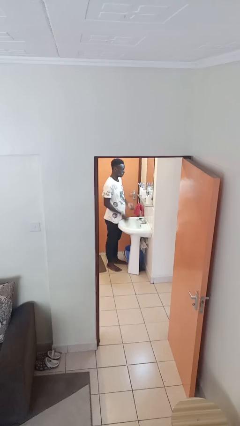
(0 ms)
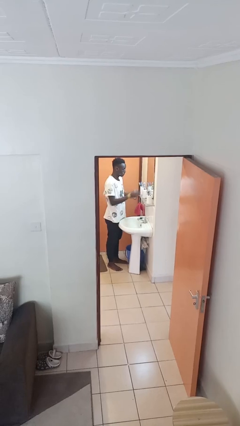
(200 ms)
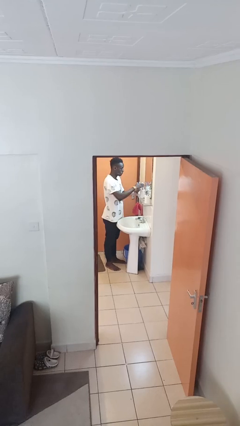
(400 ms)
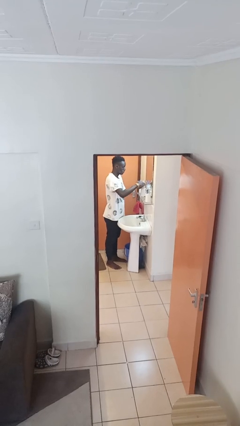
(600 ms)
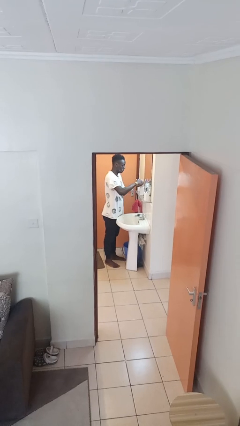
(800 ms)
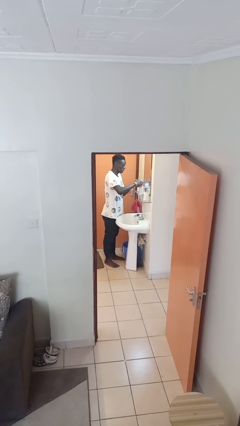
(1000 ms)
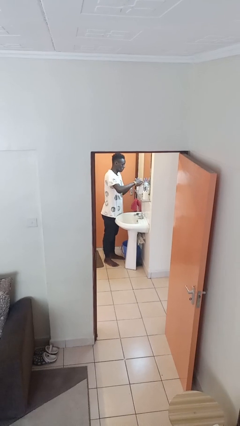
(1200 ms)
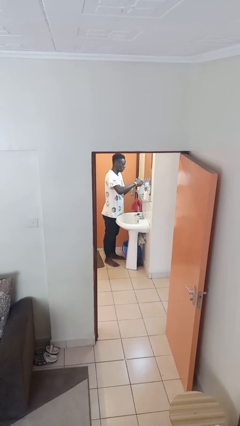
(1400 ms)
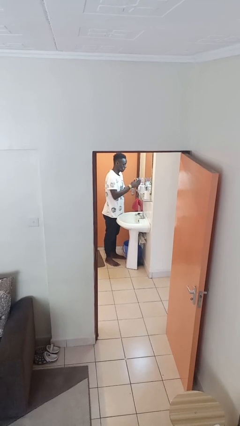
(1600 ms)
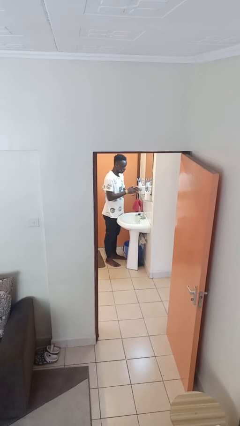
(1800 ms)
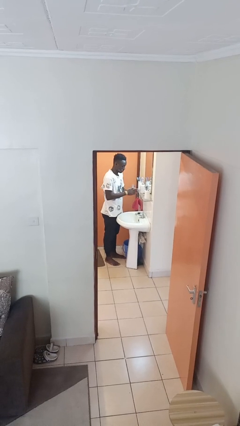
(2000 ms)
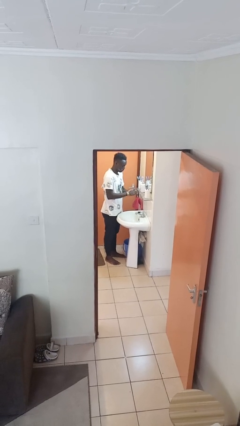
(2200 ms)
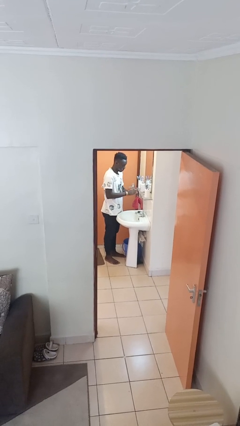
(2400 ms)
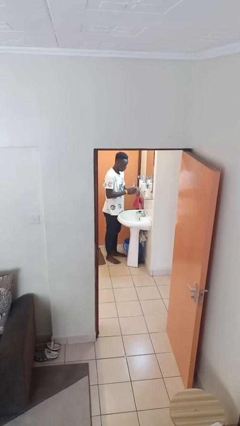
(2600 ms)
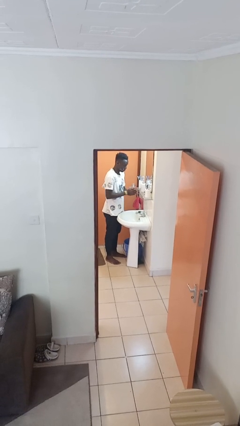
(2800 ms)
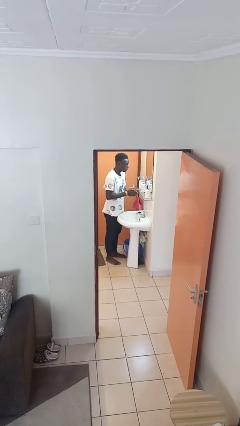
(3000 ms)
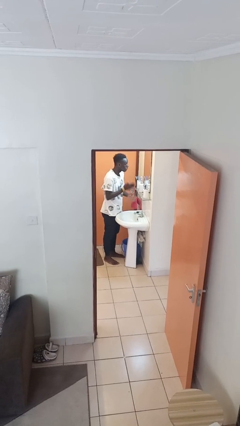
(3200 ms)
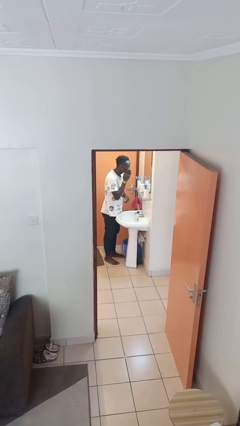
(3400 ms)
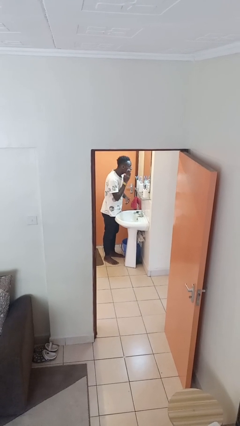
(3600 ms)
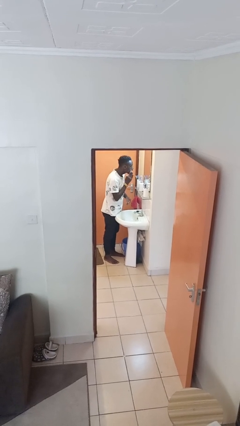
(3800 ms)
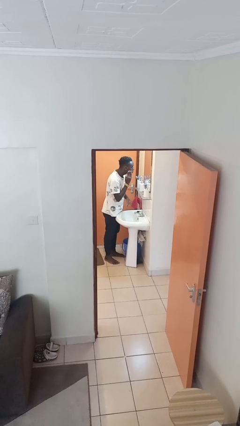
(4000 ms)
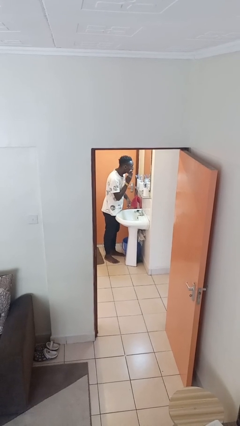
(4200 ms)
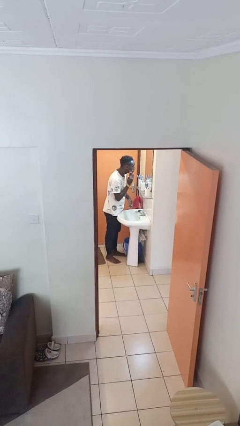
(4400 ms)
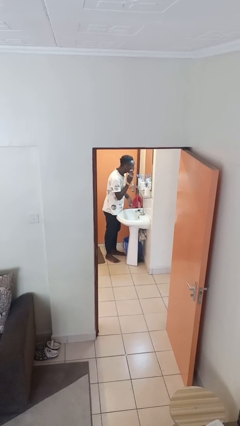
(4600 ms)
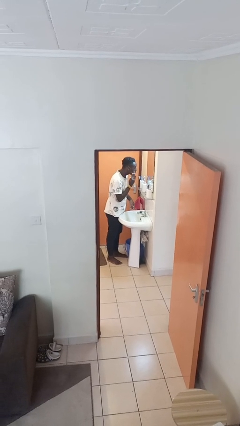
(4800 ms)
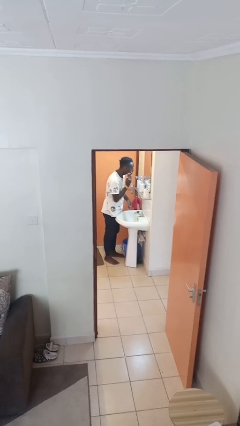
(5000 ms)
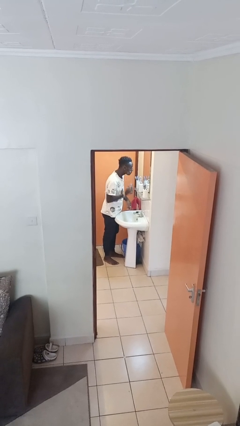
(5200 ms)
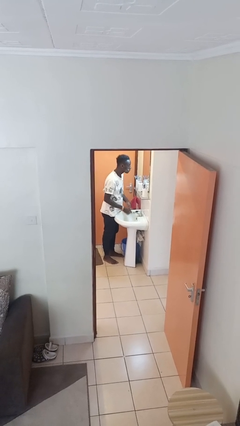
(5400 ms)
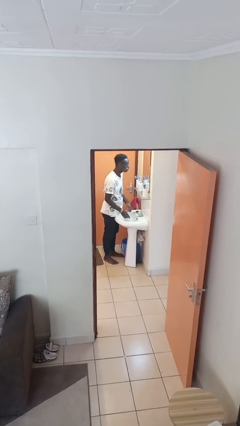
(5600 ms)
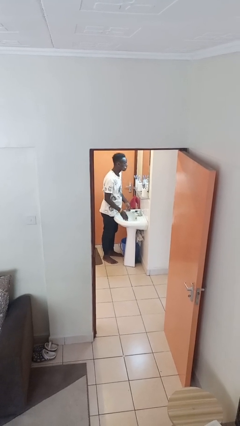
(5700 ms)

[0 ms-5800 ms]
person applies shaving cream

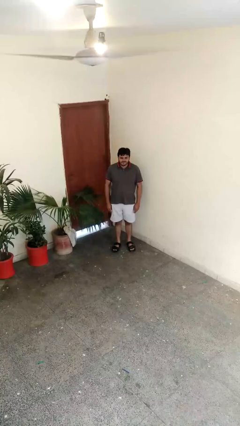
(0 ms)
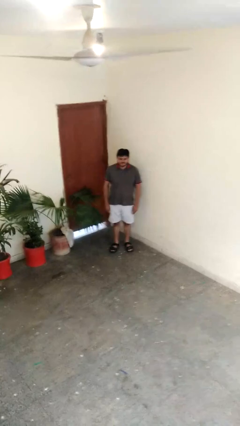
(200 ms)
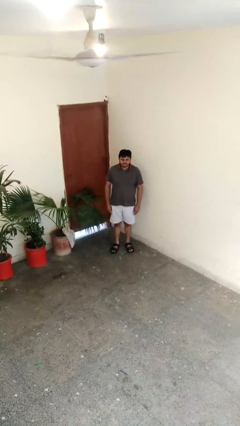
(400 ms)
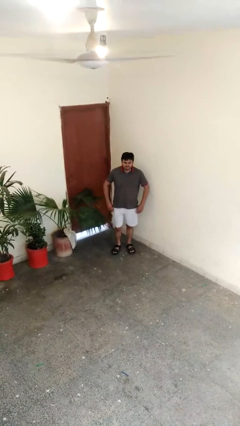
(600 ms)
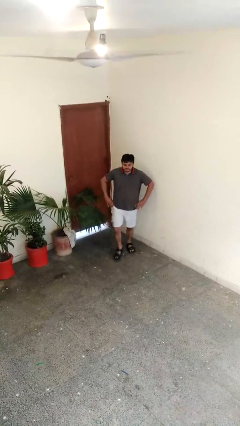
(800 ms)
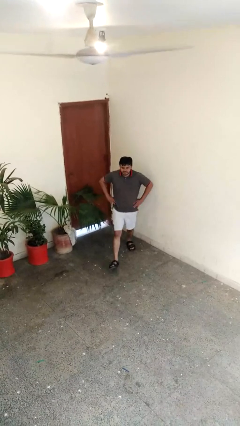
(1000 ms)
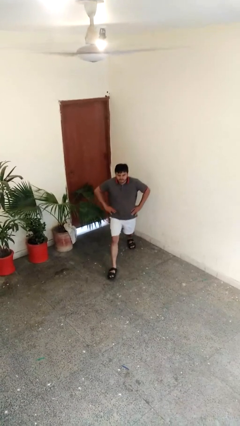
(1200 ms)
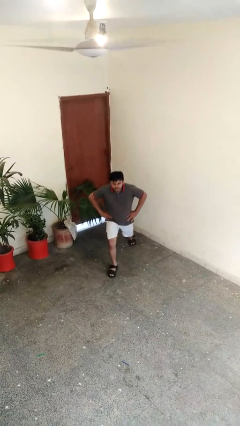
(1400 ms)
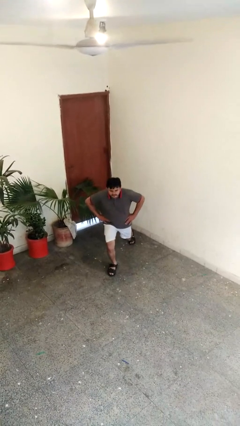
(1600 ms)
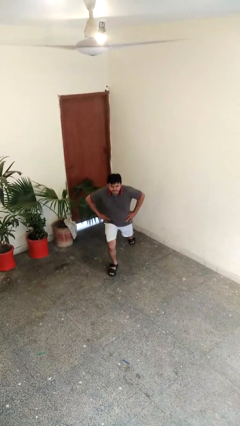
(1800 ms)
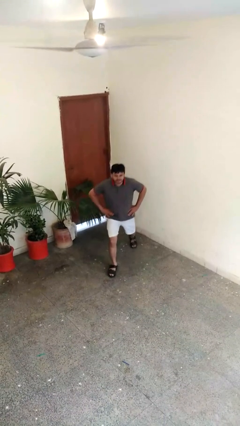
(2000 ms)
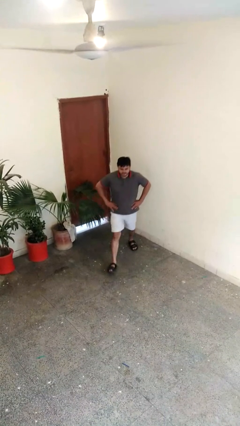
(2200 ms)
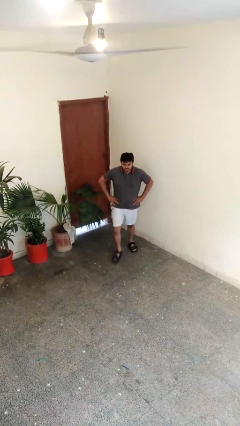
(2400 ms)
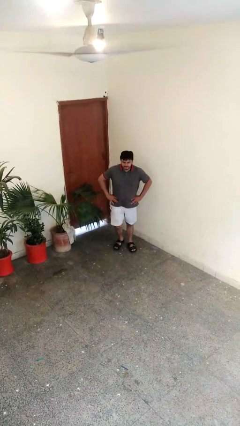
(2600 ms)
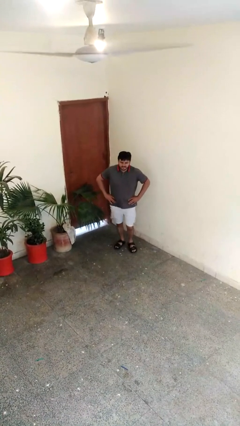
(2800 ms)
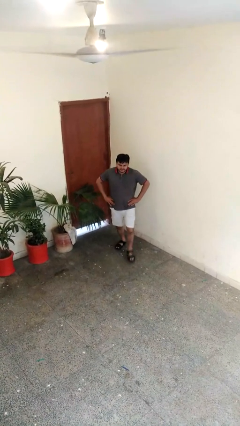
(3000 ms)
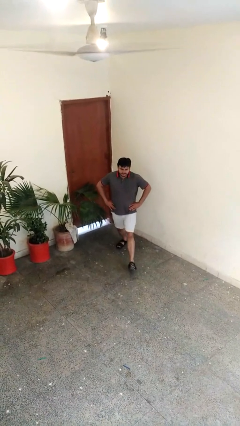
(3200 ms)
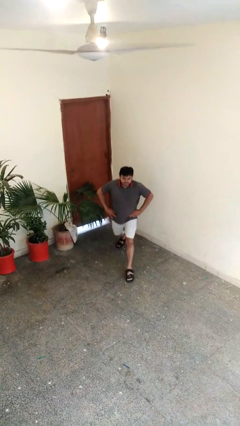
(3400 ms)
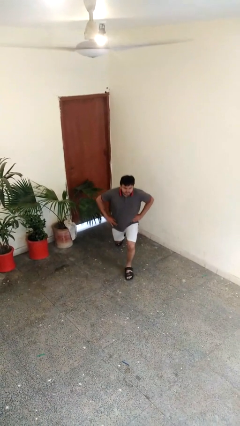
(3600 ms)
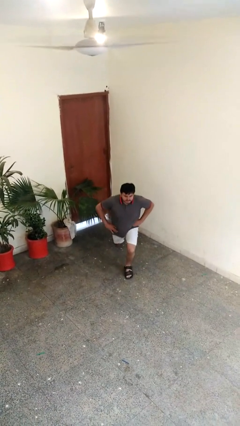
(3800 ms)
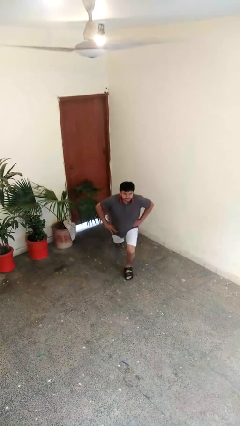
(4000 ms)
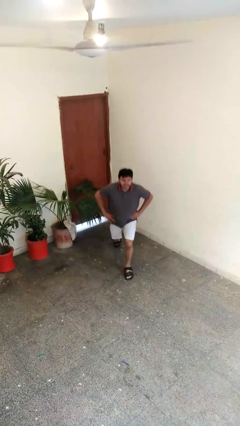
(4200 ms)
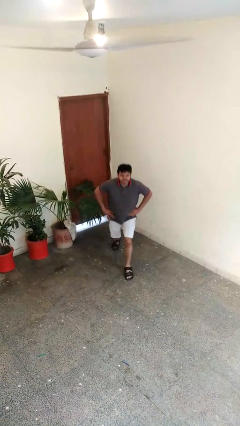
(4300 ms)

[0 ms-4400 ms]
person exercises with lunges

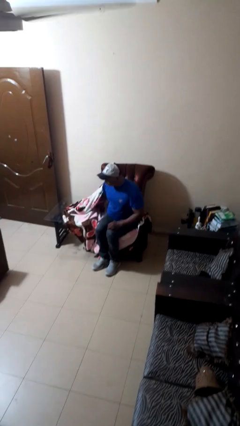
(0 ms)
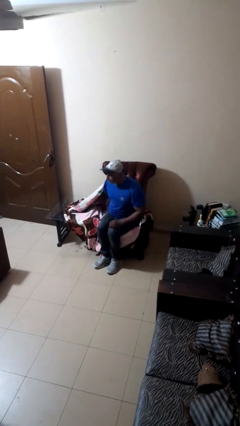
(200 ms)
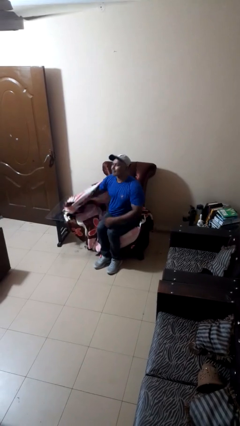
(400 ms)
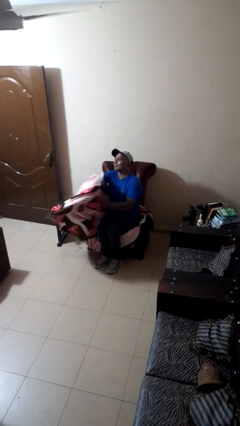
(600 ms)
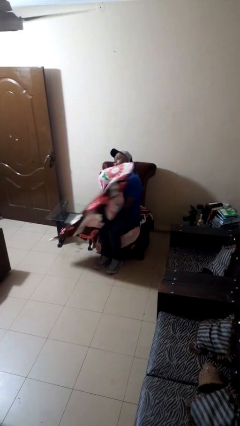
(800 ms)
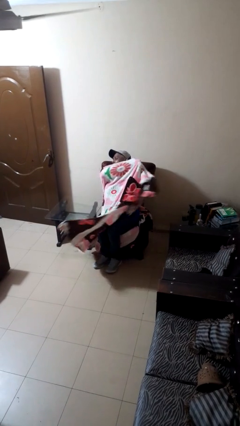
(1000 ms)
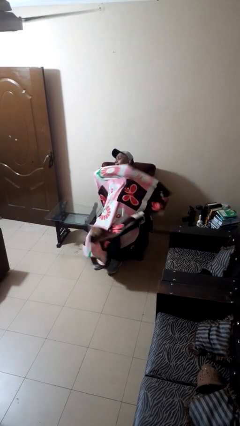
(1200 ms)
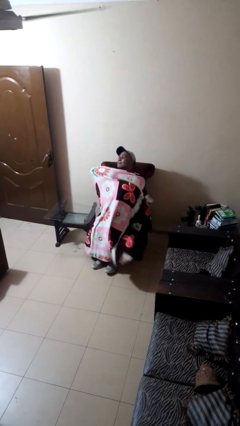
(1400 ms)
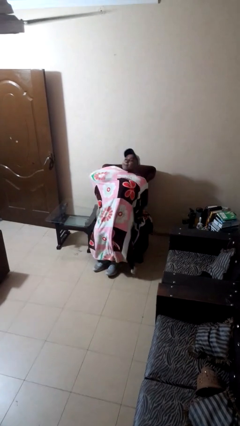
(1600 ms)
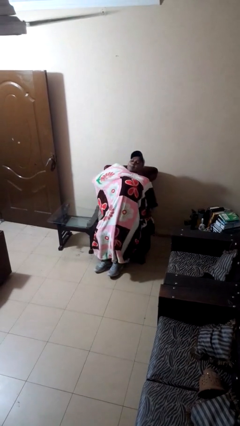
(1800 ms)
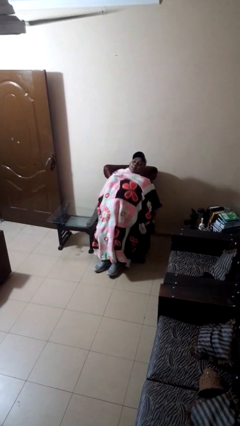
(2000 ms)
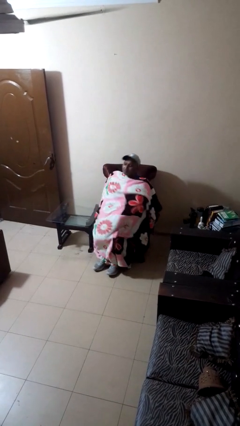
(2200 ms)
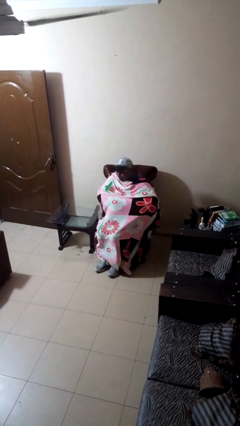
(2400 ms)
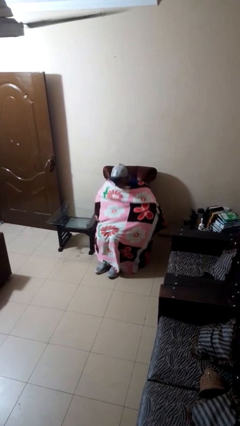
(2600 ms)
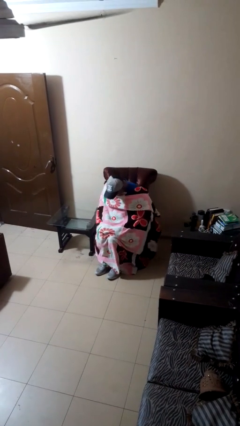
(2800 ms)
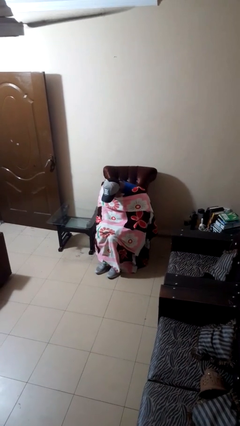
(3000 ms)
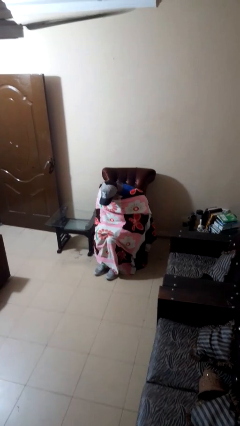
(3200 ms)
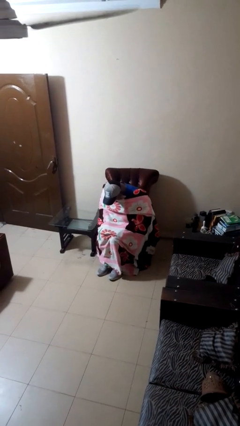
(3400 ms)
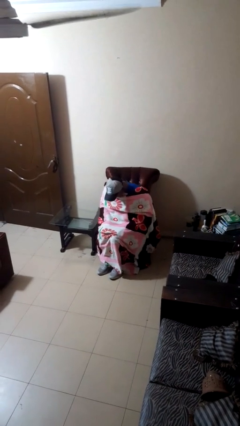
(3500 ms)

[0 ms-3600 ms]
person covers with blanket

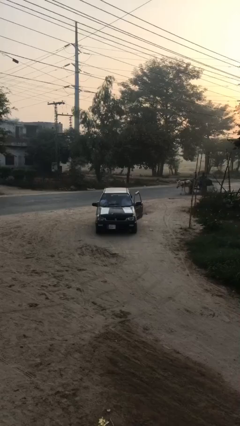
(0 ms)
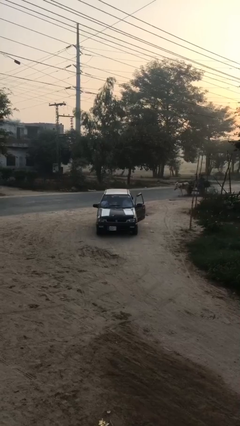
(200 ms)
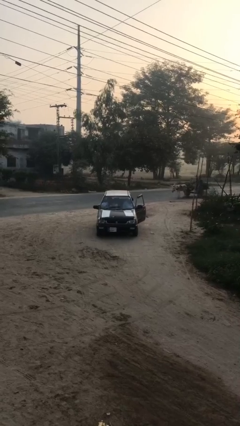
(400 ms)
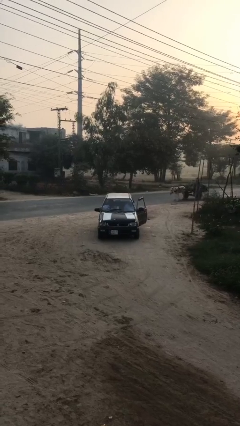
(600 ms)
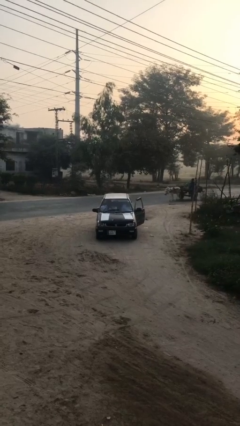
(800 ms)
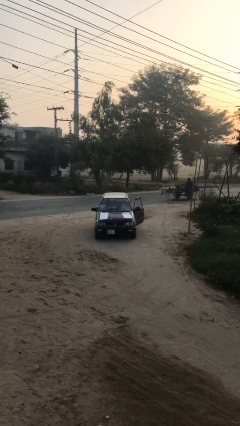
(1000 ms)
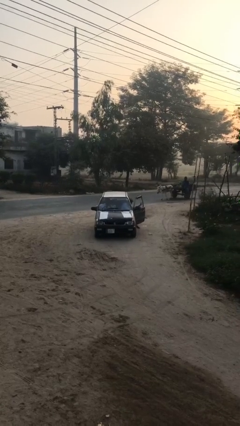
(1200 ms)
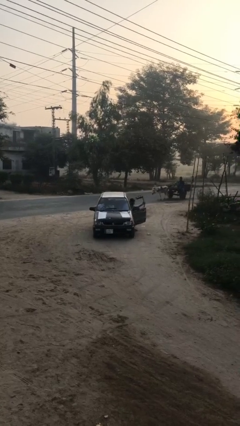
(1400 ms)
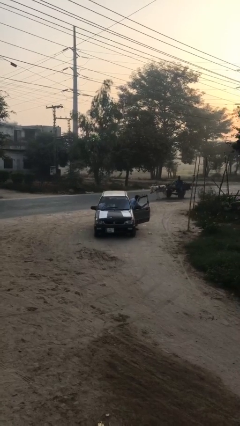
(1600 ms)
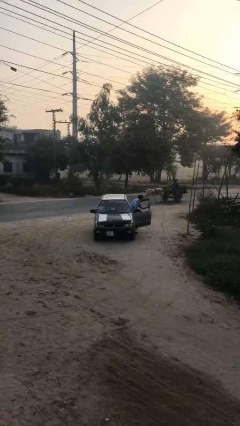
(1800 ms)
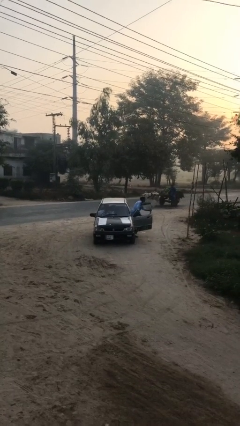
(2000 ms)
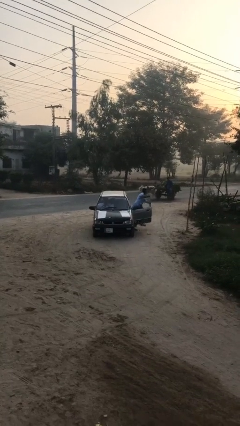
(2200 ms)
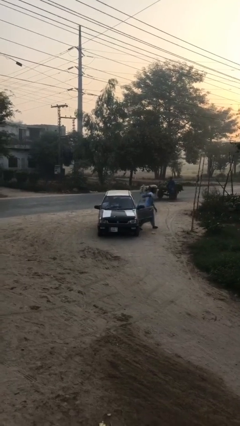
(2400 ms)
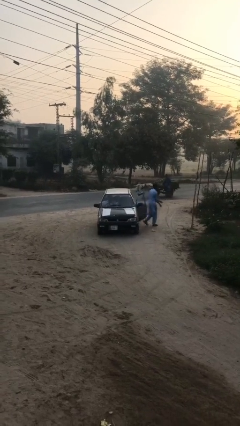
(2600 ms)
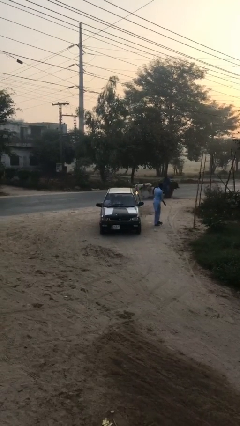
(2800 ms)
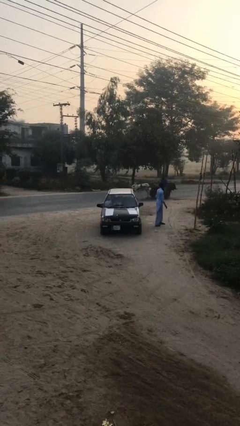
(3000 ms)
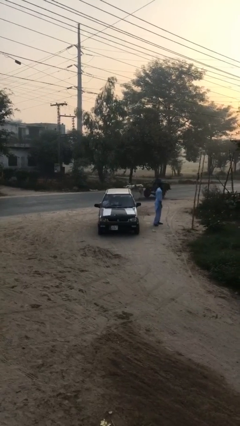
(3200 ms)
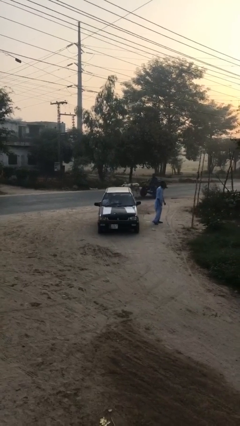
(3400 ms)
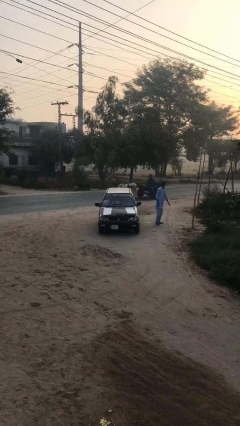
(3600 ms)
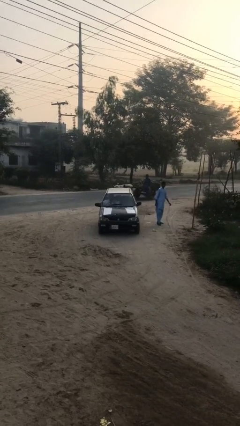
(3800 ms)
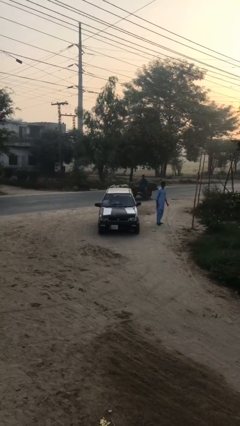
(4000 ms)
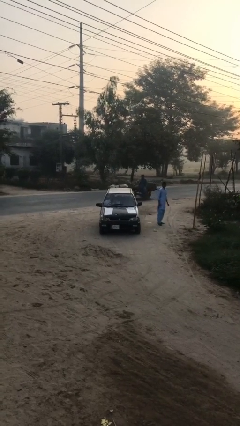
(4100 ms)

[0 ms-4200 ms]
car drops off person
